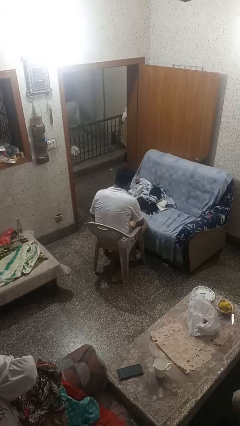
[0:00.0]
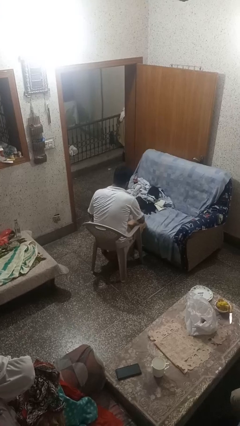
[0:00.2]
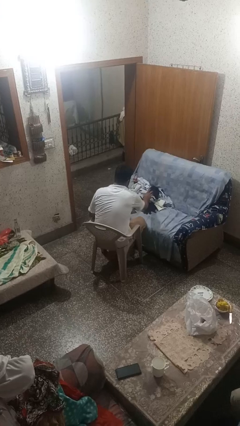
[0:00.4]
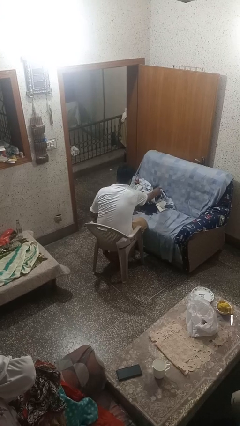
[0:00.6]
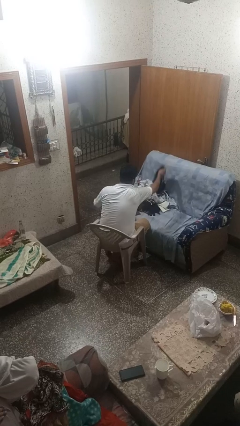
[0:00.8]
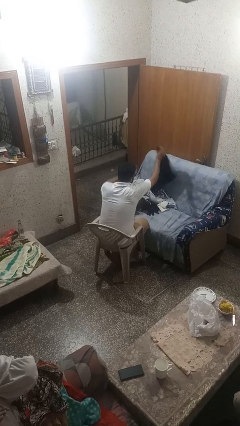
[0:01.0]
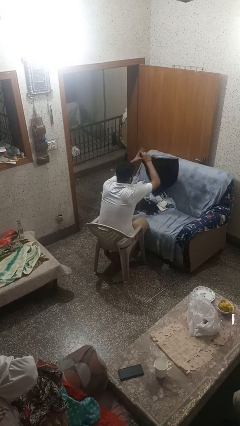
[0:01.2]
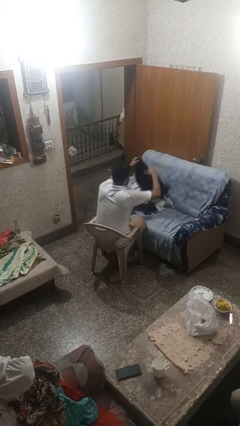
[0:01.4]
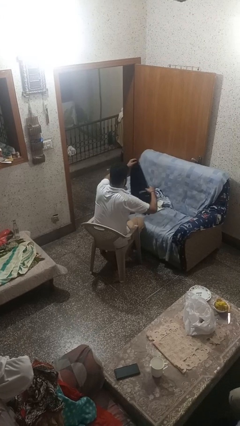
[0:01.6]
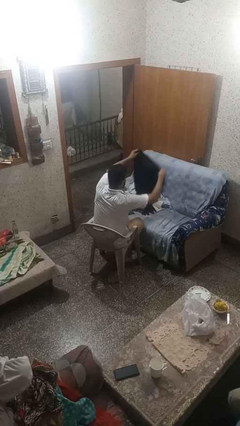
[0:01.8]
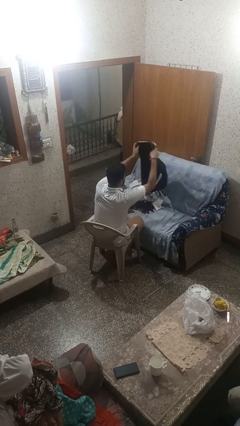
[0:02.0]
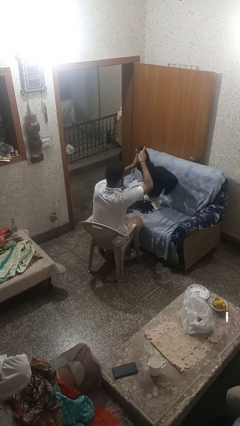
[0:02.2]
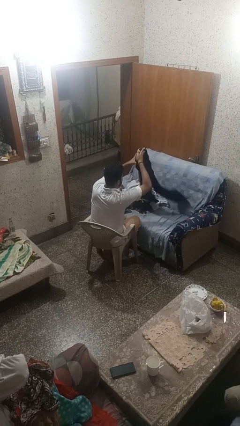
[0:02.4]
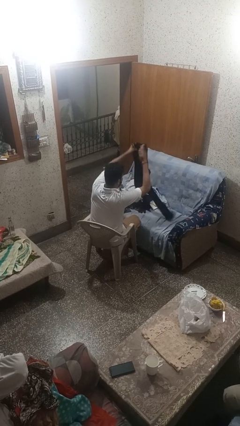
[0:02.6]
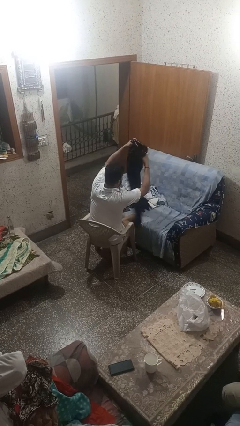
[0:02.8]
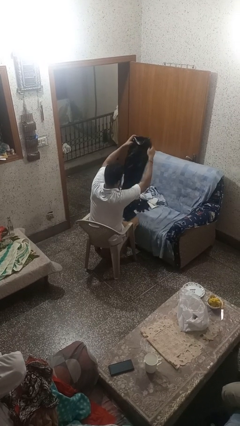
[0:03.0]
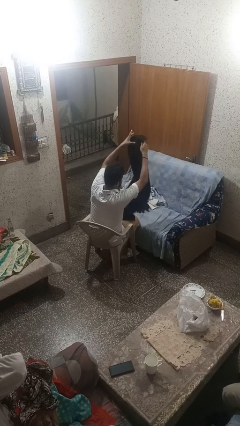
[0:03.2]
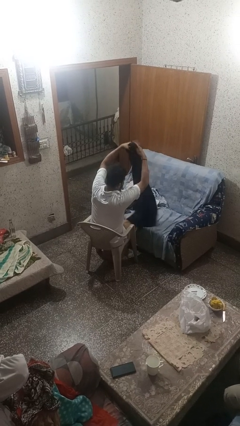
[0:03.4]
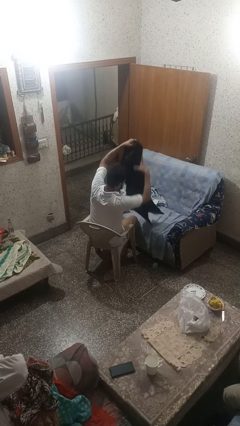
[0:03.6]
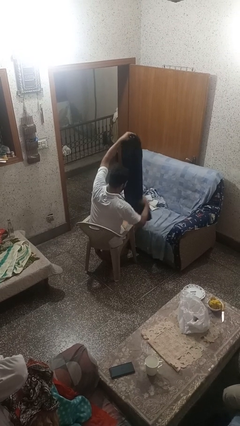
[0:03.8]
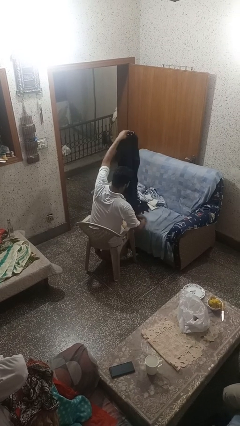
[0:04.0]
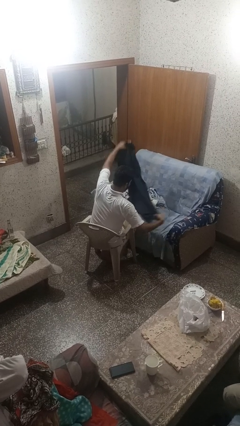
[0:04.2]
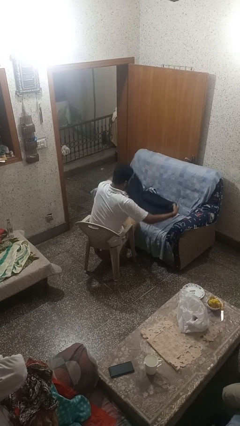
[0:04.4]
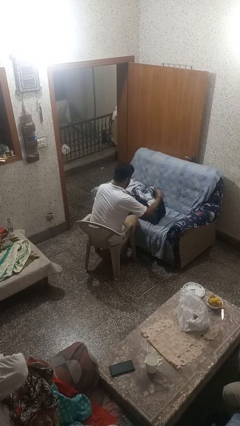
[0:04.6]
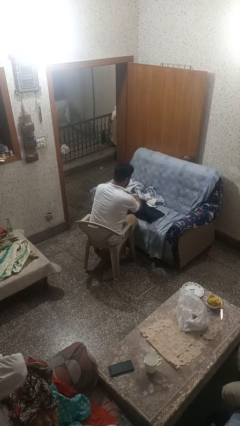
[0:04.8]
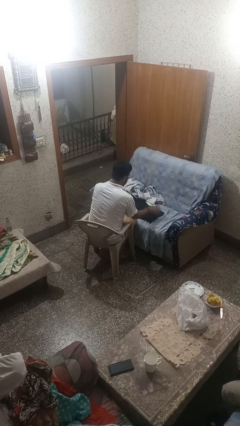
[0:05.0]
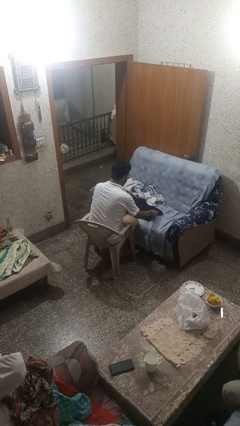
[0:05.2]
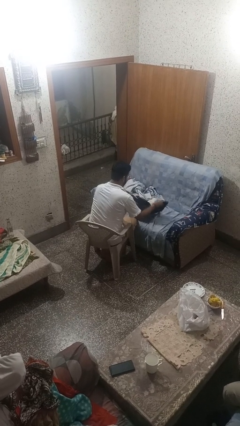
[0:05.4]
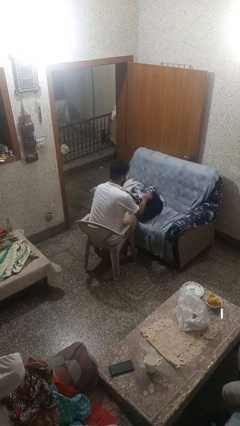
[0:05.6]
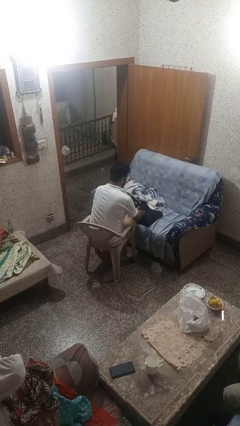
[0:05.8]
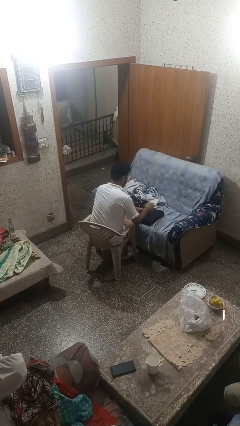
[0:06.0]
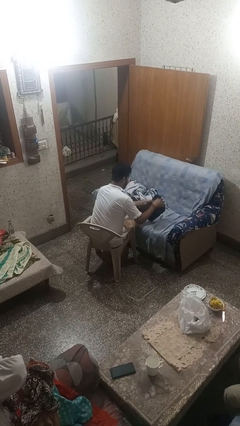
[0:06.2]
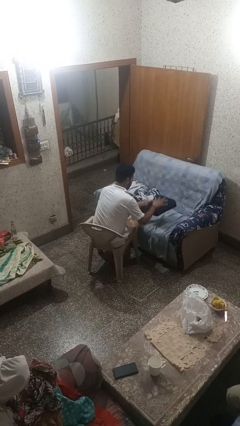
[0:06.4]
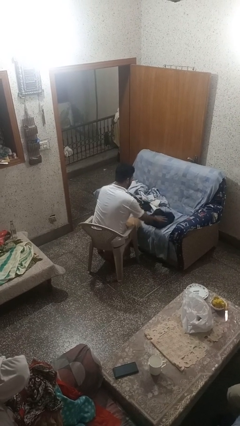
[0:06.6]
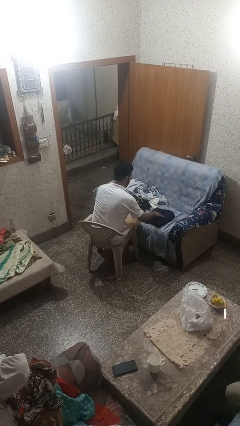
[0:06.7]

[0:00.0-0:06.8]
person folds pants

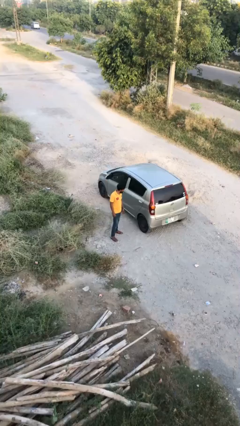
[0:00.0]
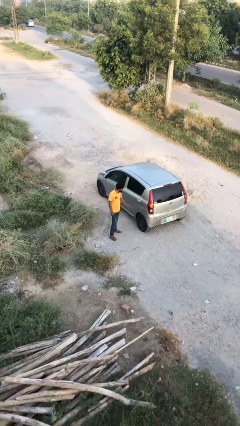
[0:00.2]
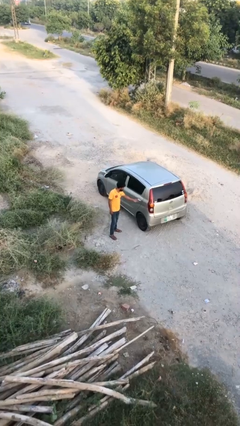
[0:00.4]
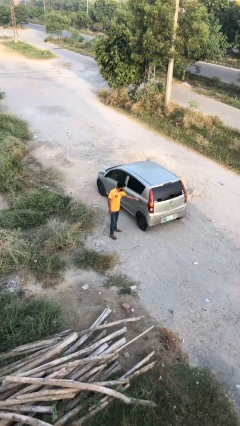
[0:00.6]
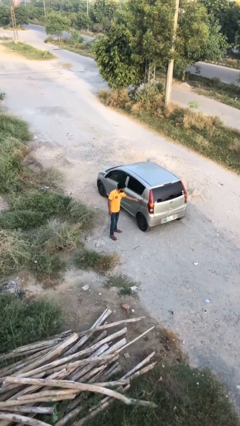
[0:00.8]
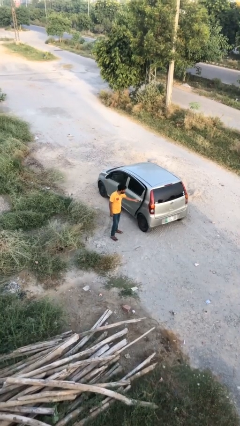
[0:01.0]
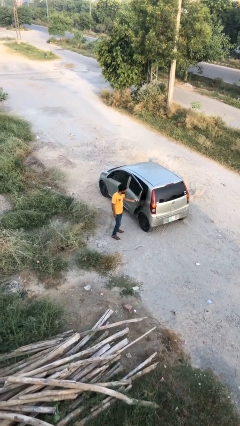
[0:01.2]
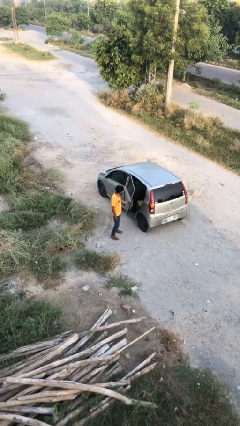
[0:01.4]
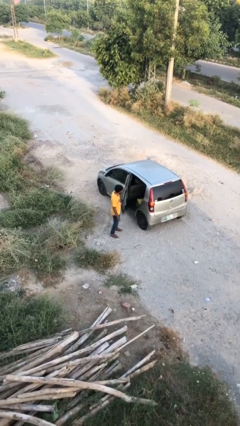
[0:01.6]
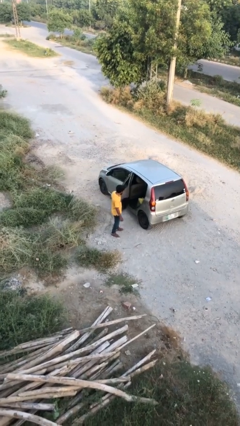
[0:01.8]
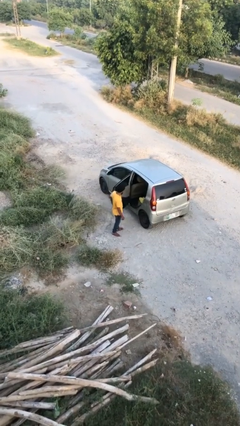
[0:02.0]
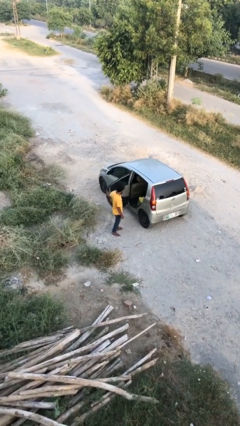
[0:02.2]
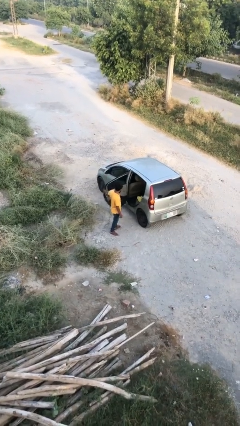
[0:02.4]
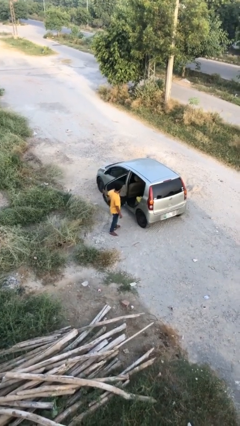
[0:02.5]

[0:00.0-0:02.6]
person opens car door

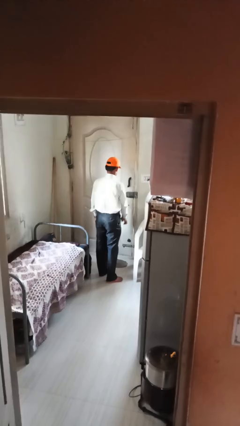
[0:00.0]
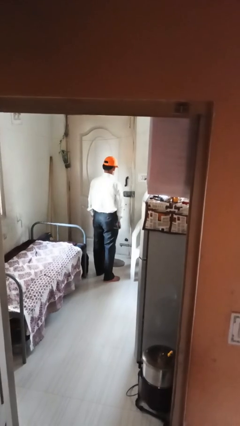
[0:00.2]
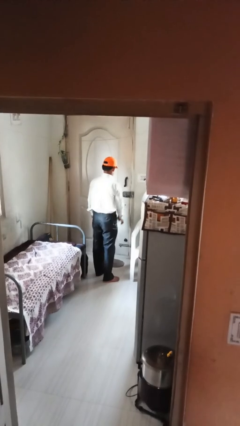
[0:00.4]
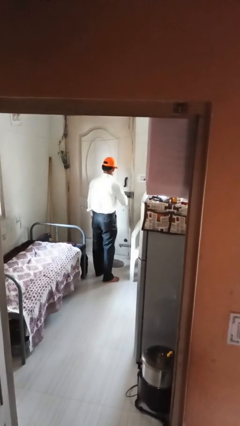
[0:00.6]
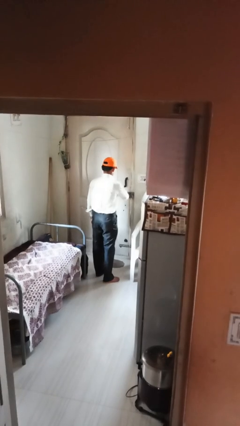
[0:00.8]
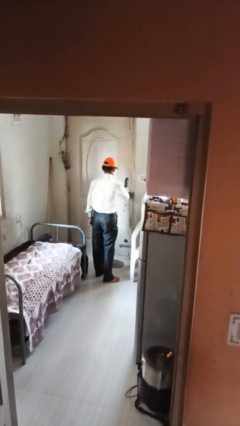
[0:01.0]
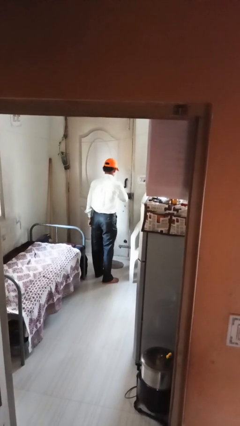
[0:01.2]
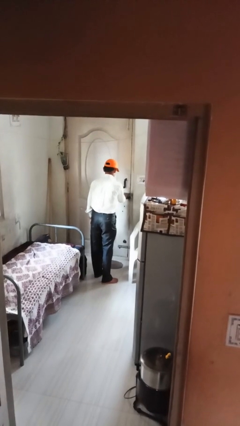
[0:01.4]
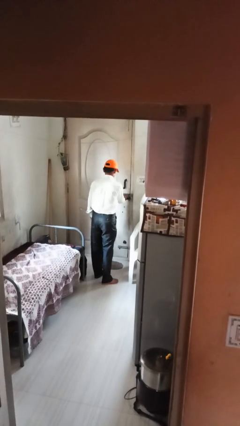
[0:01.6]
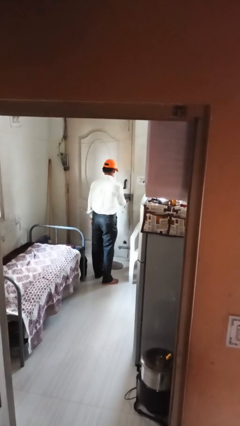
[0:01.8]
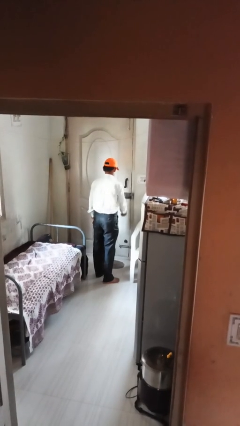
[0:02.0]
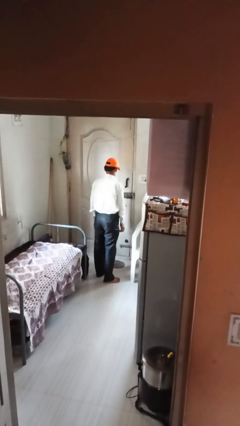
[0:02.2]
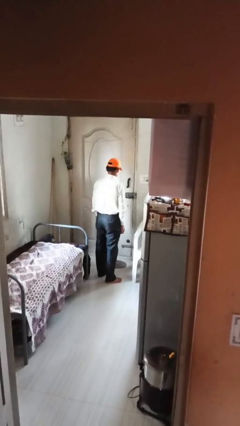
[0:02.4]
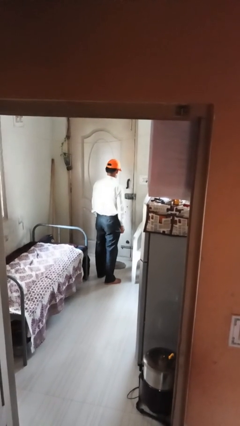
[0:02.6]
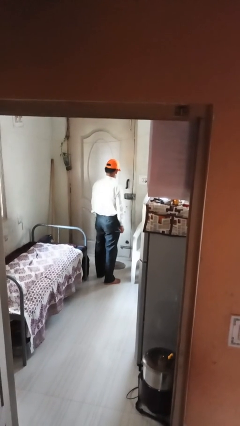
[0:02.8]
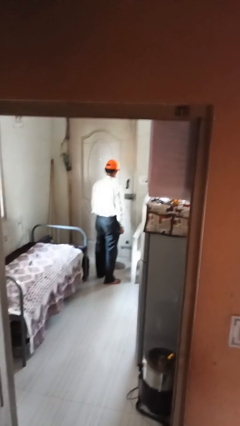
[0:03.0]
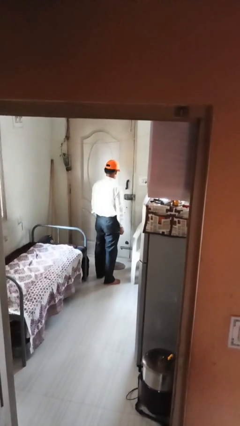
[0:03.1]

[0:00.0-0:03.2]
person locks door with keys

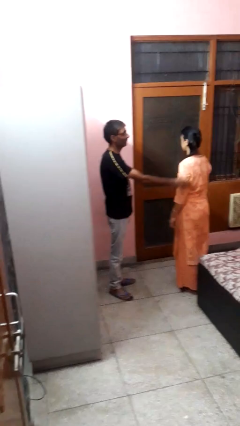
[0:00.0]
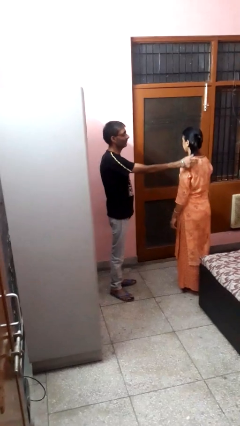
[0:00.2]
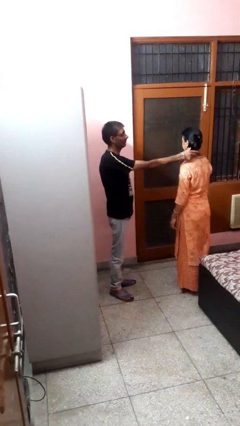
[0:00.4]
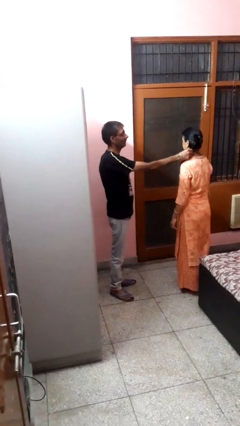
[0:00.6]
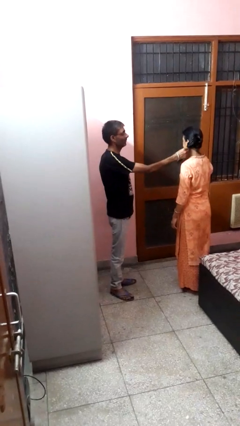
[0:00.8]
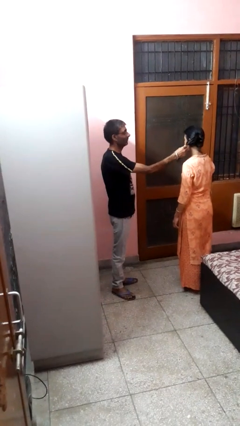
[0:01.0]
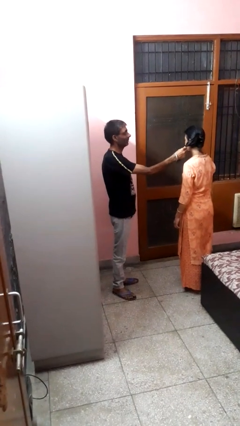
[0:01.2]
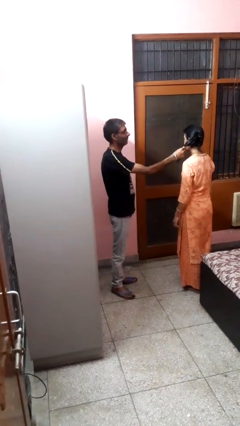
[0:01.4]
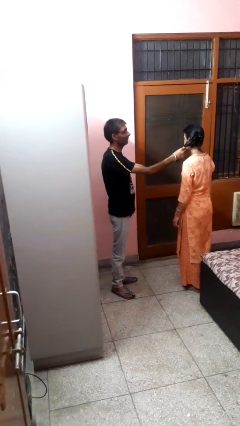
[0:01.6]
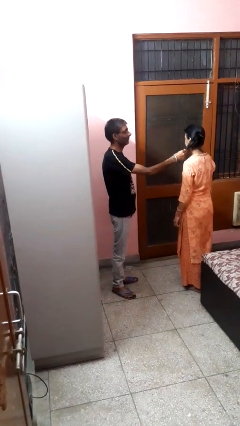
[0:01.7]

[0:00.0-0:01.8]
person grabs person by hair

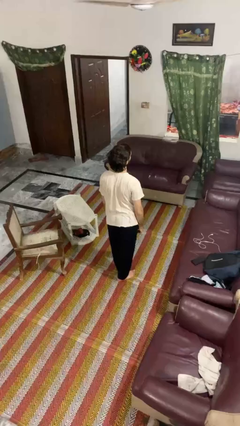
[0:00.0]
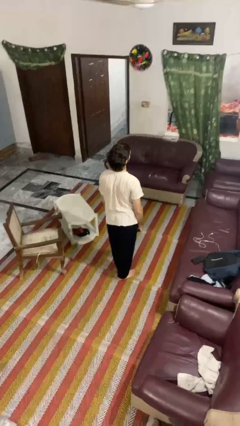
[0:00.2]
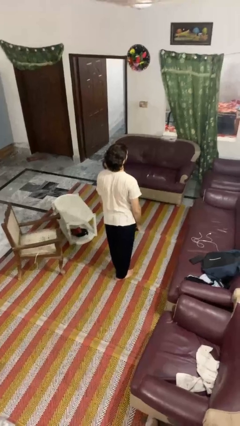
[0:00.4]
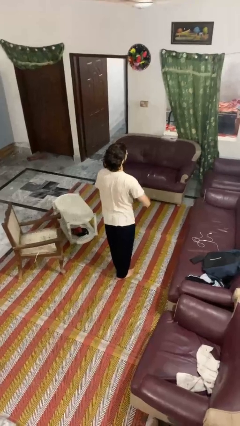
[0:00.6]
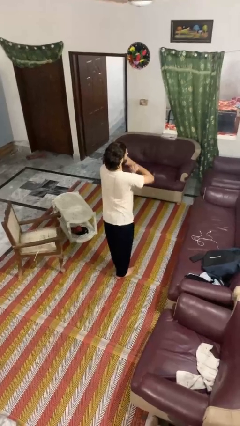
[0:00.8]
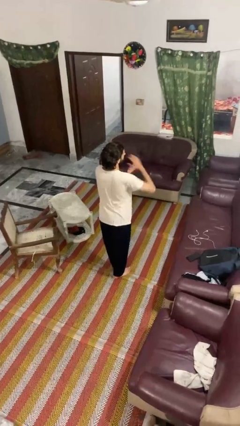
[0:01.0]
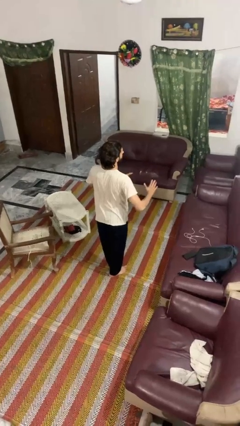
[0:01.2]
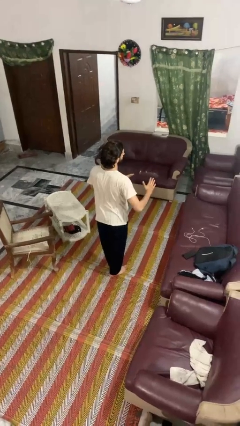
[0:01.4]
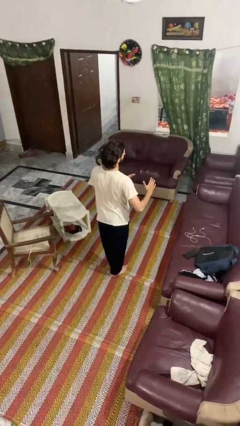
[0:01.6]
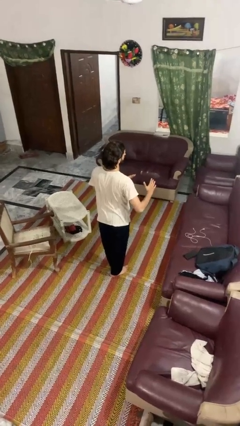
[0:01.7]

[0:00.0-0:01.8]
person karate chop

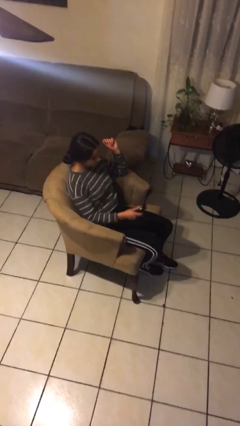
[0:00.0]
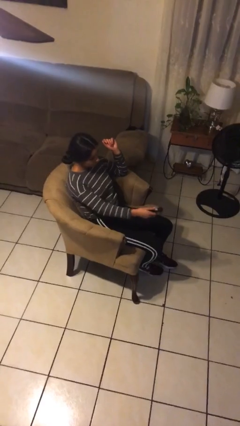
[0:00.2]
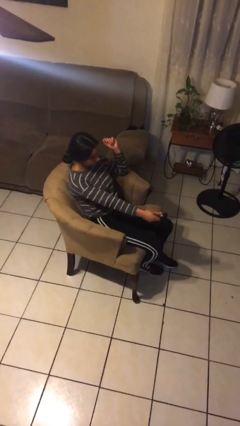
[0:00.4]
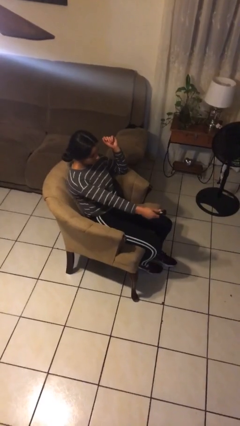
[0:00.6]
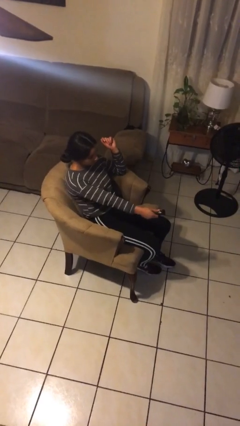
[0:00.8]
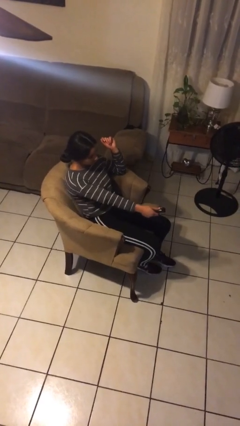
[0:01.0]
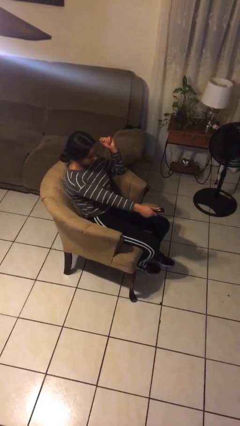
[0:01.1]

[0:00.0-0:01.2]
person uses television remote
